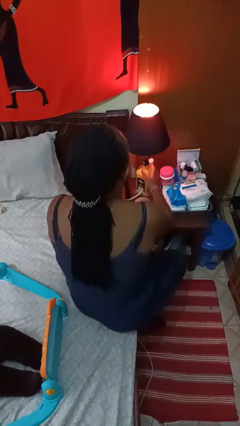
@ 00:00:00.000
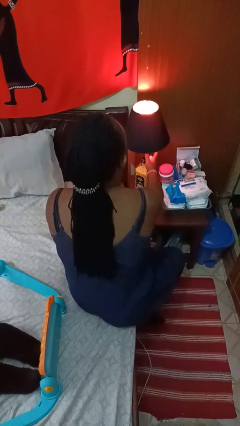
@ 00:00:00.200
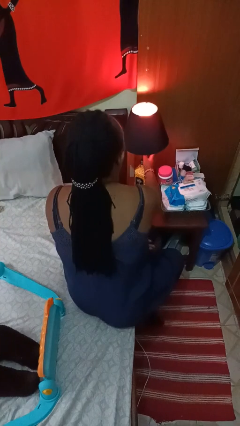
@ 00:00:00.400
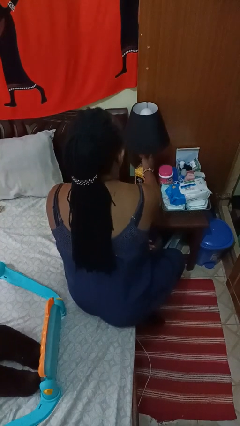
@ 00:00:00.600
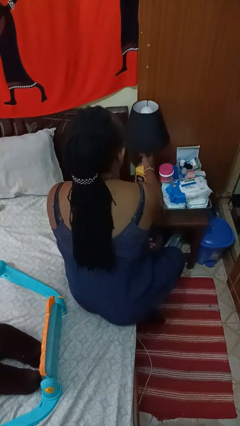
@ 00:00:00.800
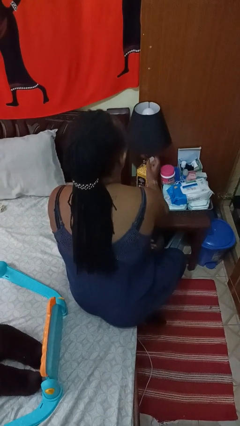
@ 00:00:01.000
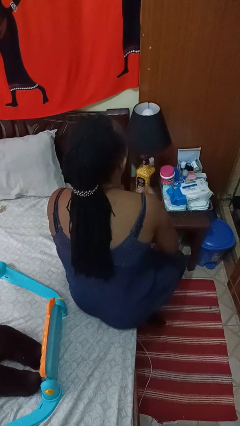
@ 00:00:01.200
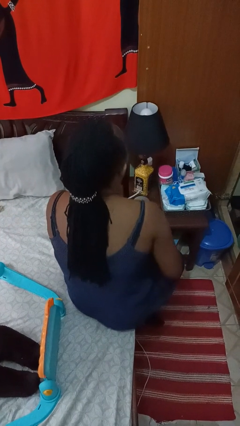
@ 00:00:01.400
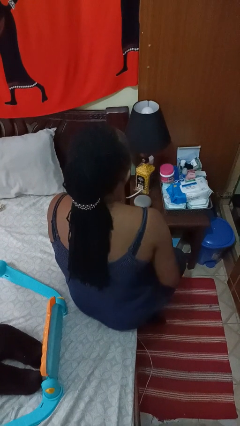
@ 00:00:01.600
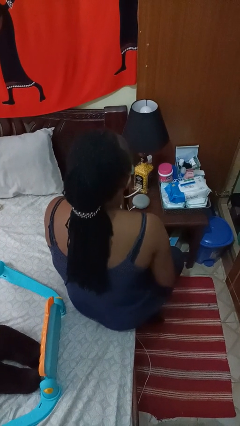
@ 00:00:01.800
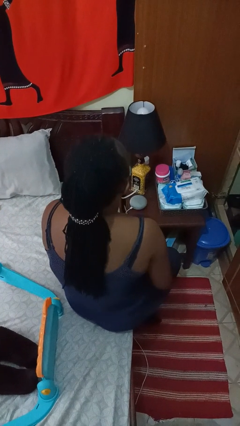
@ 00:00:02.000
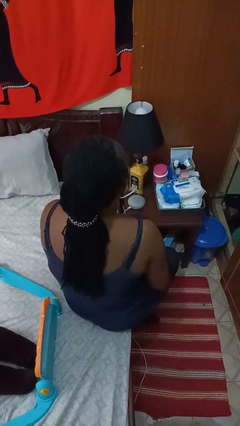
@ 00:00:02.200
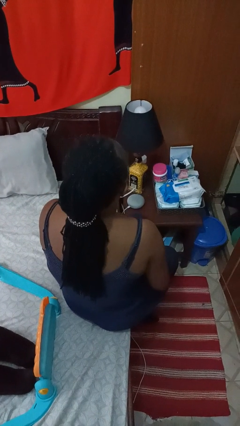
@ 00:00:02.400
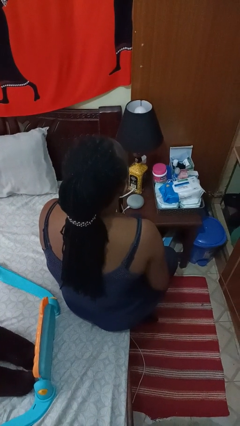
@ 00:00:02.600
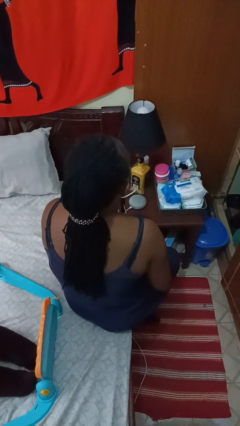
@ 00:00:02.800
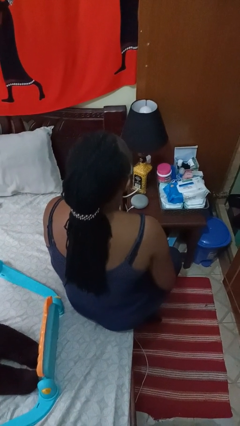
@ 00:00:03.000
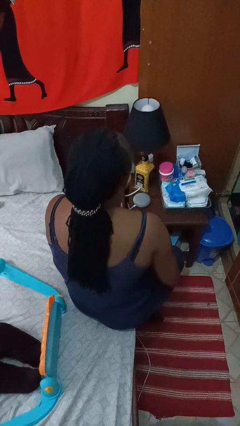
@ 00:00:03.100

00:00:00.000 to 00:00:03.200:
person turns off lamp

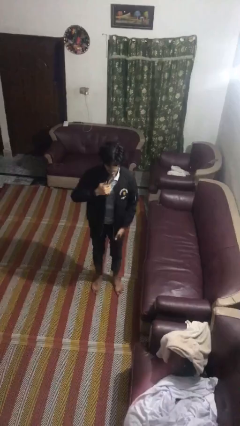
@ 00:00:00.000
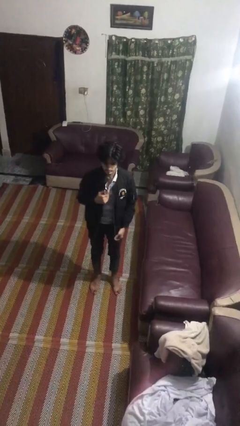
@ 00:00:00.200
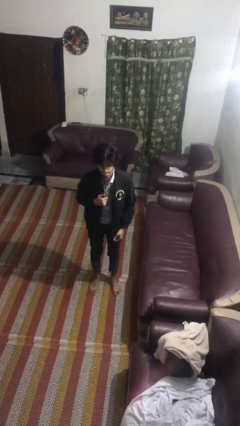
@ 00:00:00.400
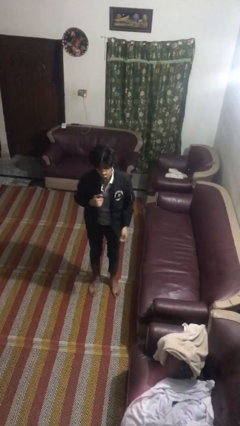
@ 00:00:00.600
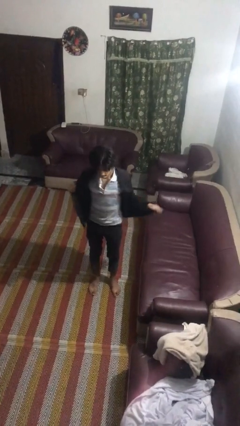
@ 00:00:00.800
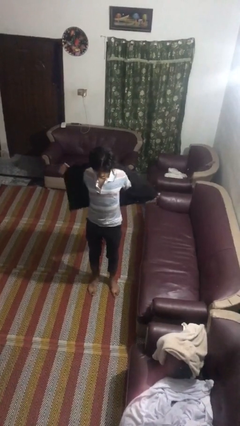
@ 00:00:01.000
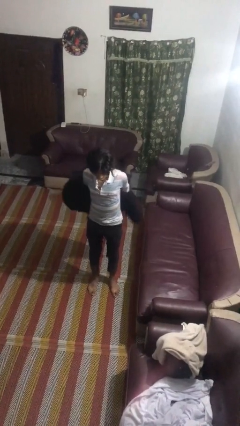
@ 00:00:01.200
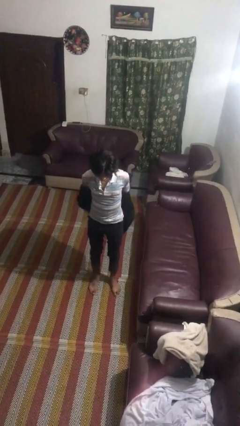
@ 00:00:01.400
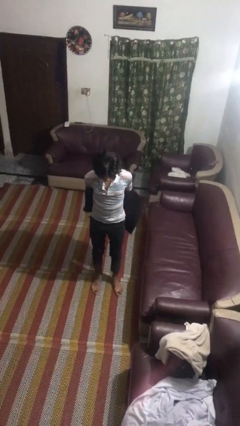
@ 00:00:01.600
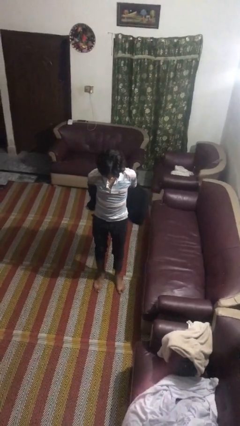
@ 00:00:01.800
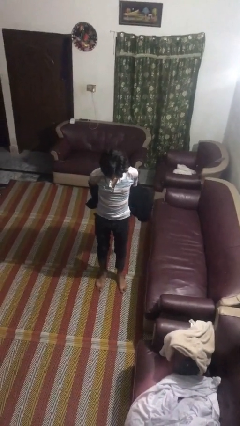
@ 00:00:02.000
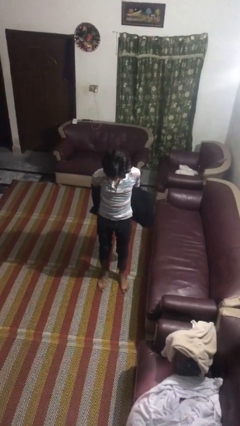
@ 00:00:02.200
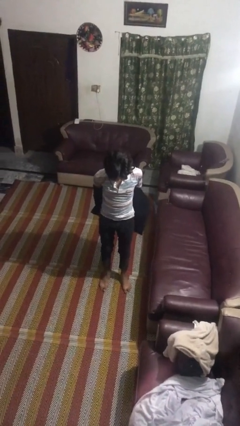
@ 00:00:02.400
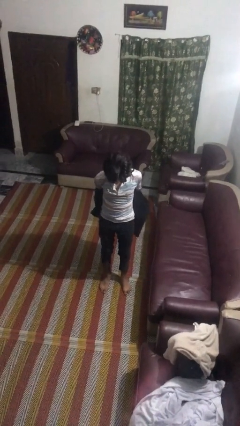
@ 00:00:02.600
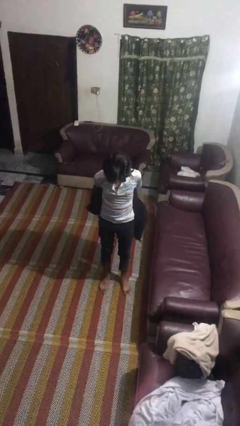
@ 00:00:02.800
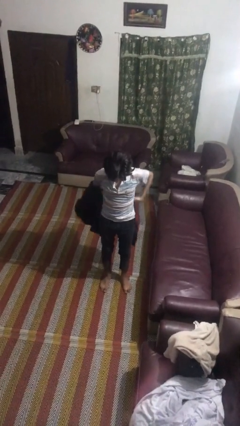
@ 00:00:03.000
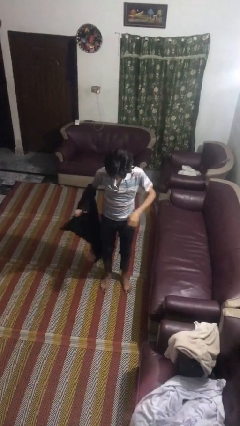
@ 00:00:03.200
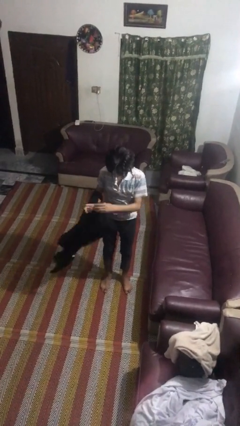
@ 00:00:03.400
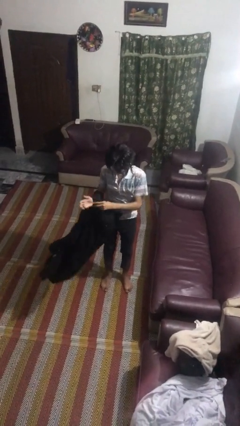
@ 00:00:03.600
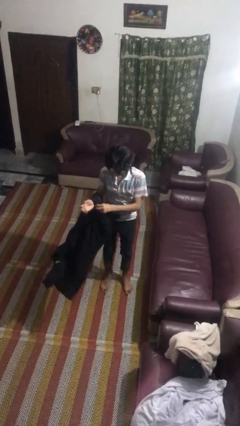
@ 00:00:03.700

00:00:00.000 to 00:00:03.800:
person takes off jacket

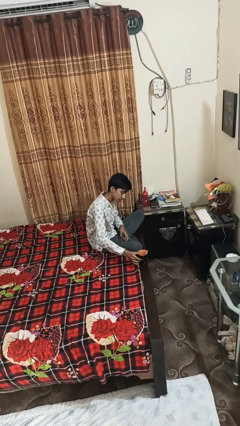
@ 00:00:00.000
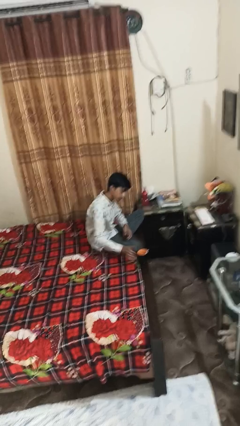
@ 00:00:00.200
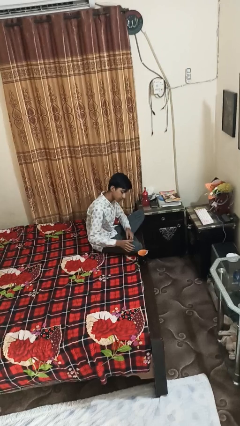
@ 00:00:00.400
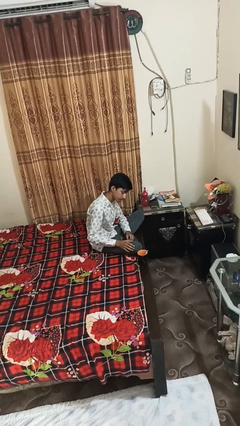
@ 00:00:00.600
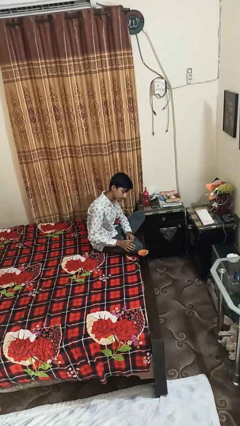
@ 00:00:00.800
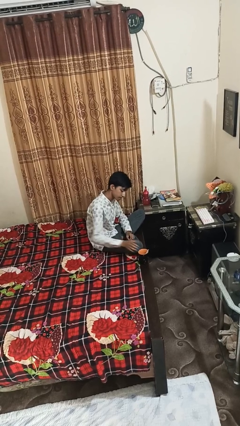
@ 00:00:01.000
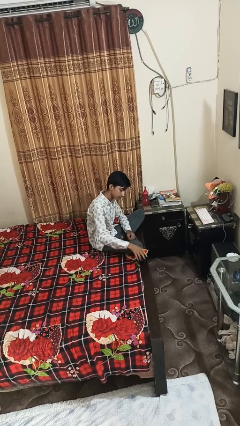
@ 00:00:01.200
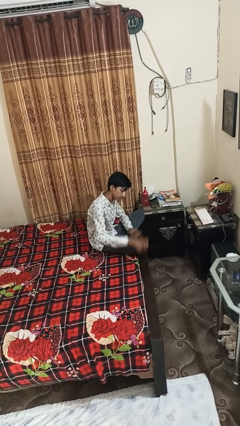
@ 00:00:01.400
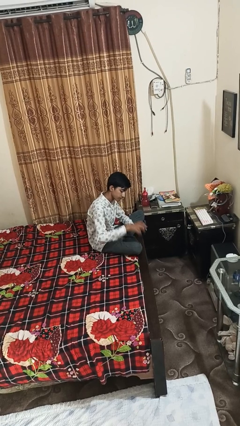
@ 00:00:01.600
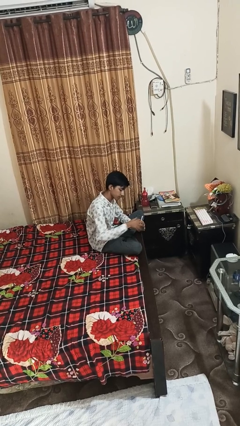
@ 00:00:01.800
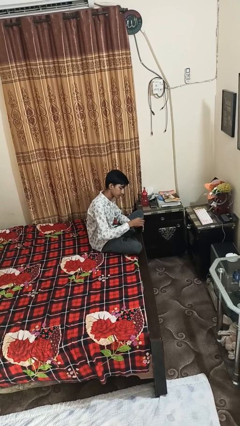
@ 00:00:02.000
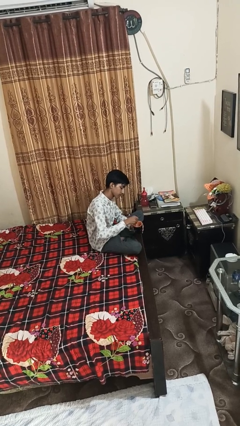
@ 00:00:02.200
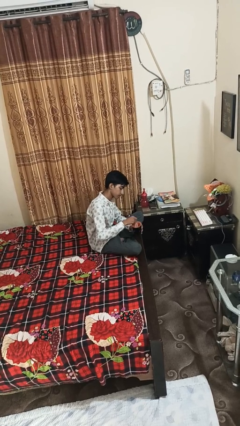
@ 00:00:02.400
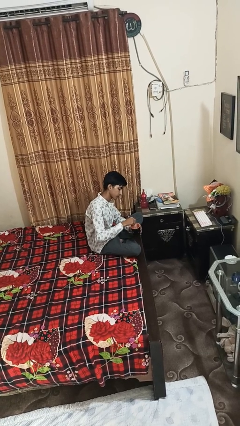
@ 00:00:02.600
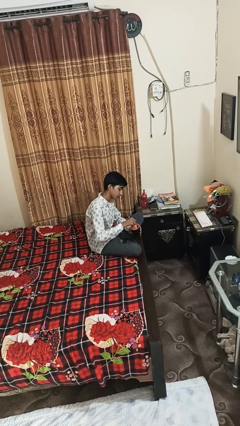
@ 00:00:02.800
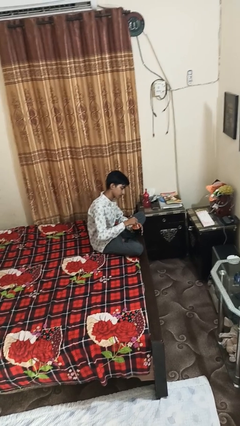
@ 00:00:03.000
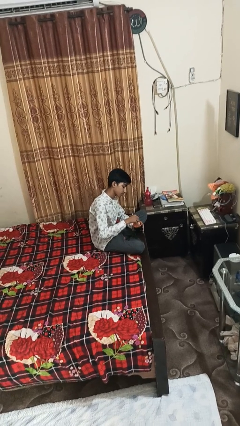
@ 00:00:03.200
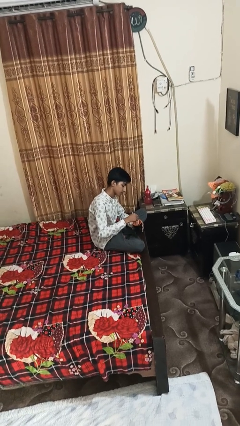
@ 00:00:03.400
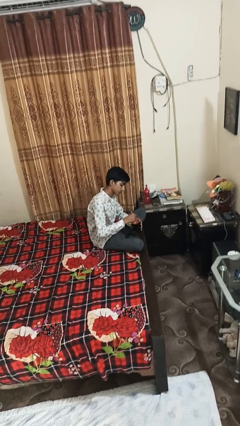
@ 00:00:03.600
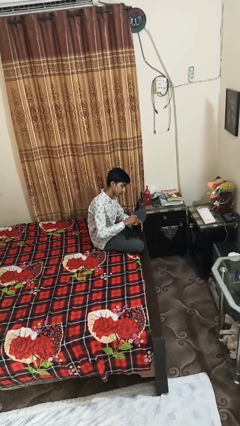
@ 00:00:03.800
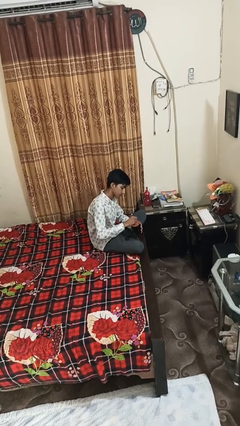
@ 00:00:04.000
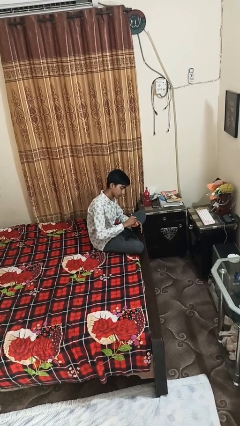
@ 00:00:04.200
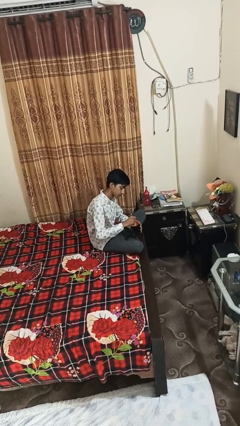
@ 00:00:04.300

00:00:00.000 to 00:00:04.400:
person stirs mug

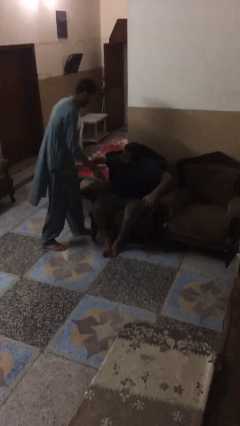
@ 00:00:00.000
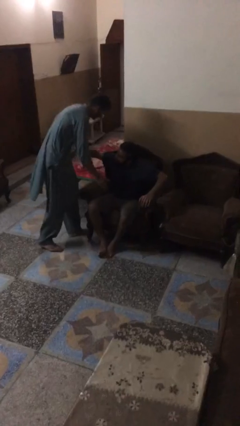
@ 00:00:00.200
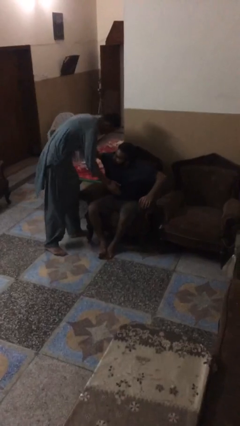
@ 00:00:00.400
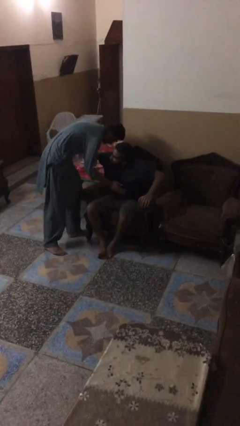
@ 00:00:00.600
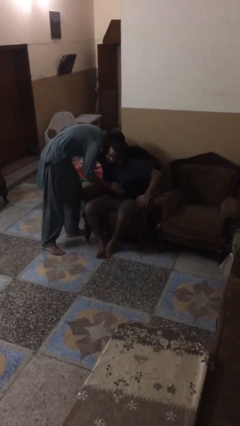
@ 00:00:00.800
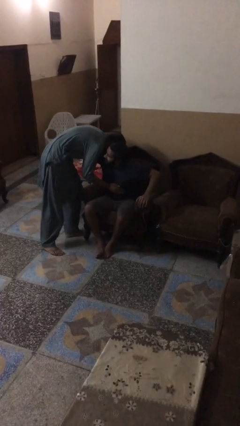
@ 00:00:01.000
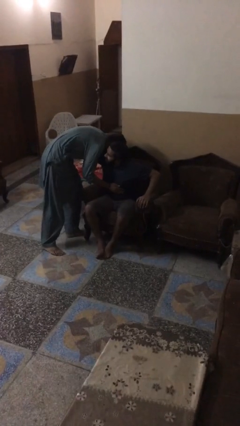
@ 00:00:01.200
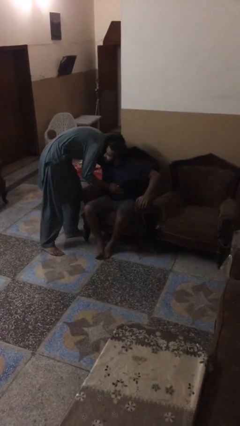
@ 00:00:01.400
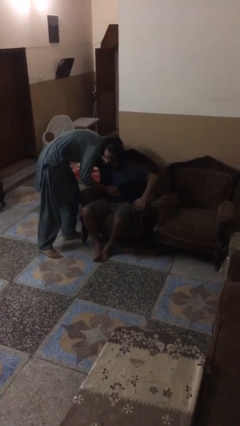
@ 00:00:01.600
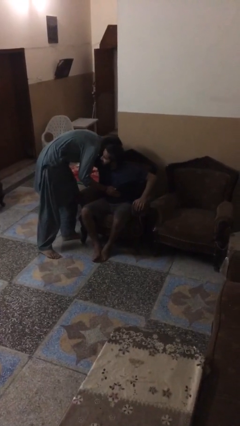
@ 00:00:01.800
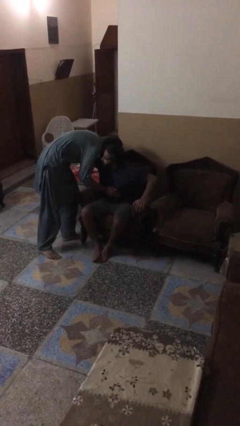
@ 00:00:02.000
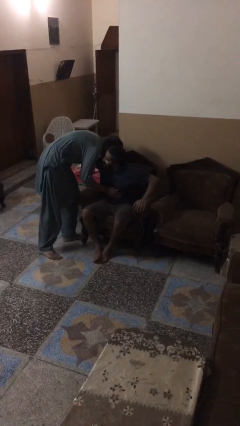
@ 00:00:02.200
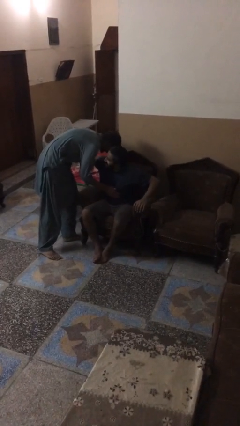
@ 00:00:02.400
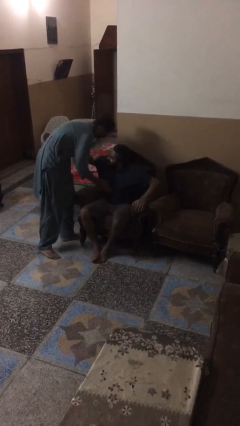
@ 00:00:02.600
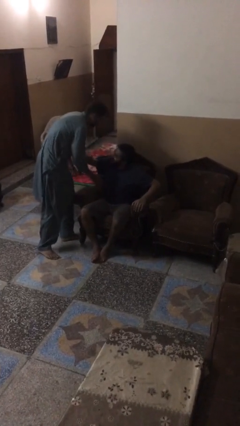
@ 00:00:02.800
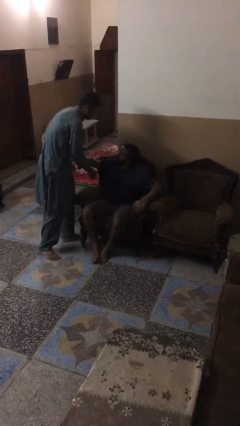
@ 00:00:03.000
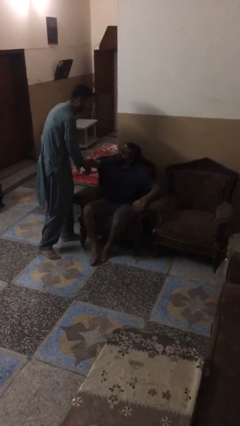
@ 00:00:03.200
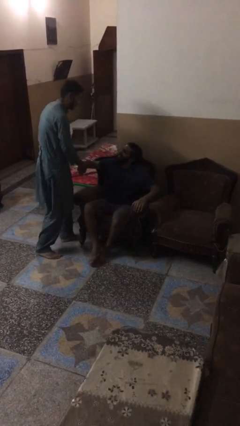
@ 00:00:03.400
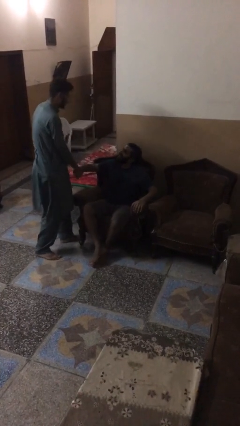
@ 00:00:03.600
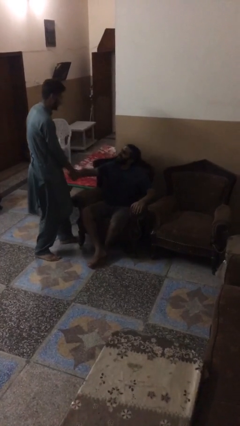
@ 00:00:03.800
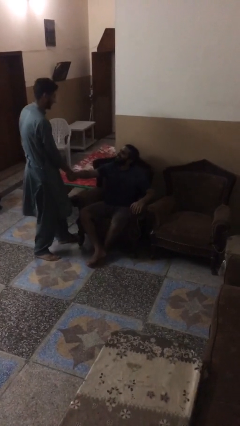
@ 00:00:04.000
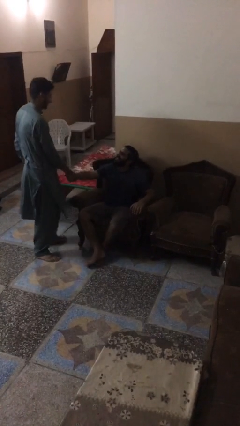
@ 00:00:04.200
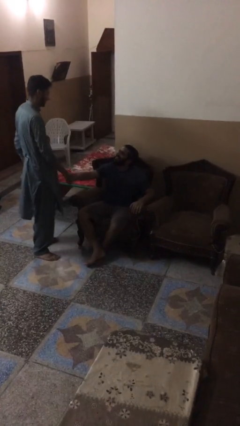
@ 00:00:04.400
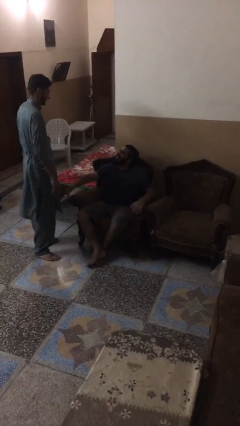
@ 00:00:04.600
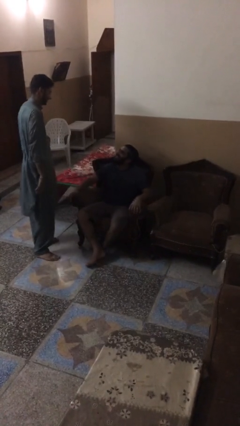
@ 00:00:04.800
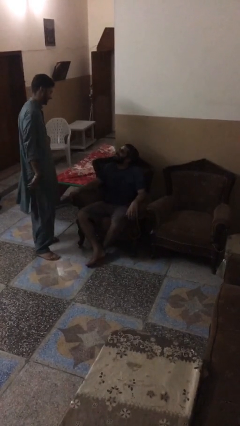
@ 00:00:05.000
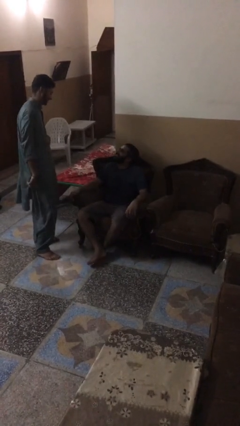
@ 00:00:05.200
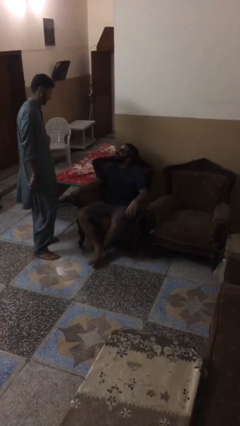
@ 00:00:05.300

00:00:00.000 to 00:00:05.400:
person embraces person

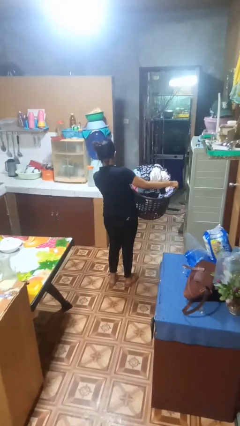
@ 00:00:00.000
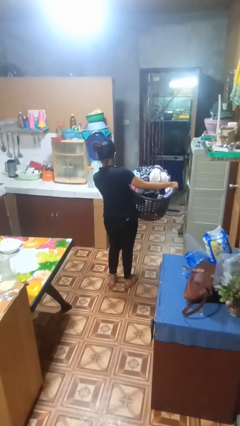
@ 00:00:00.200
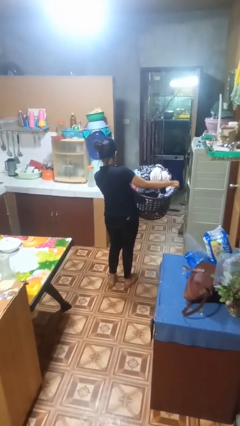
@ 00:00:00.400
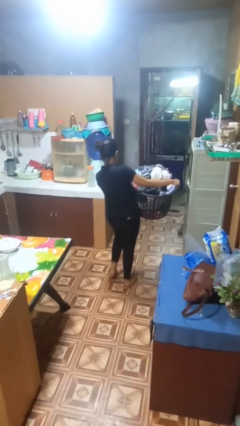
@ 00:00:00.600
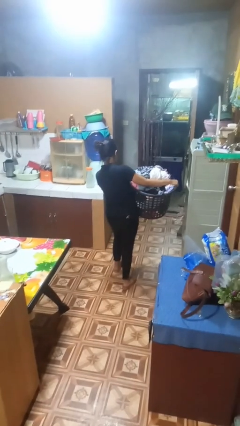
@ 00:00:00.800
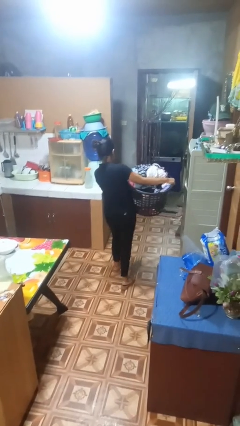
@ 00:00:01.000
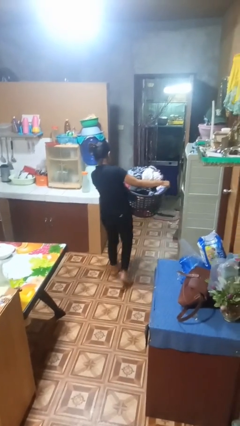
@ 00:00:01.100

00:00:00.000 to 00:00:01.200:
person carries laundry basket
